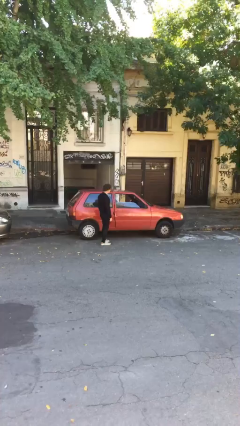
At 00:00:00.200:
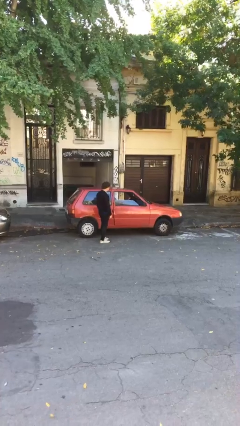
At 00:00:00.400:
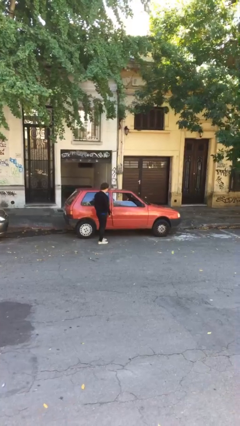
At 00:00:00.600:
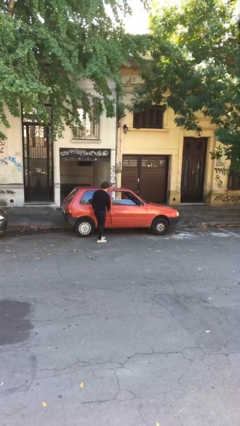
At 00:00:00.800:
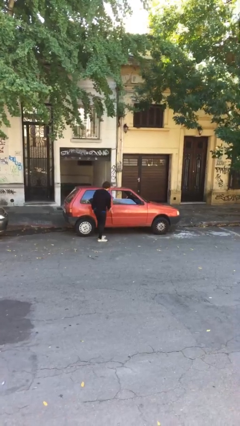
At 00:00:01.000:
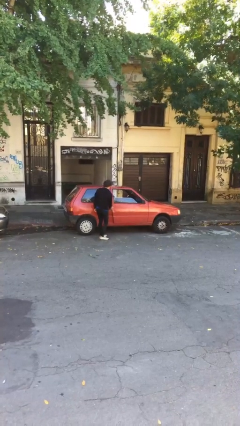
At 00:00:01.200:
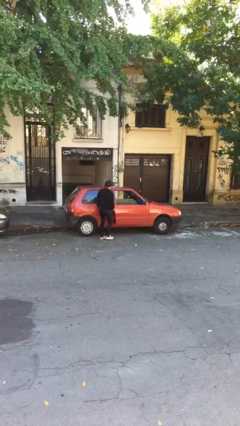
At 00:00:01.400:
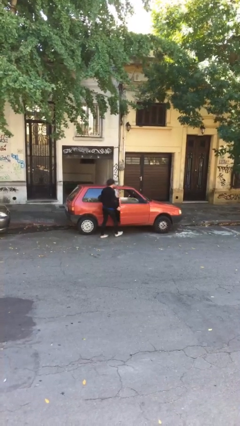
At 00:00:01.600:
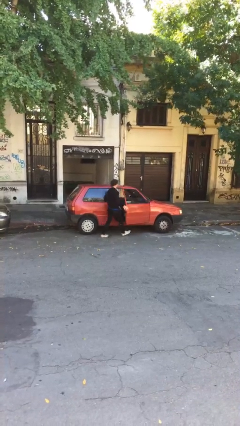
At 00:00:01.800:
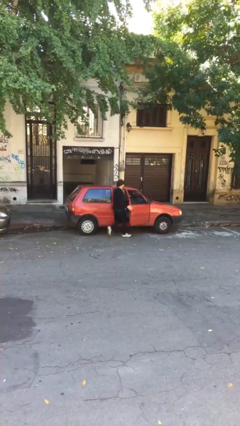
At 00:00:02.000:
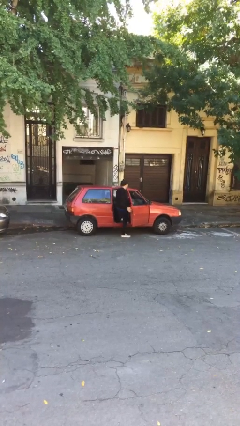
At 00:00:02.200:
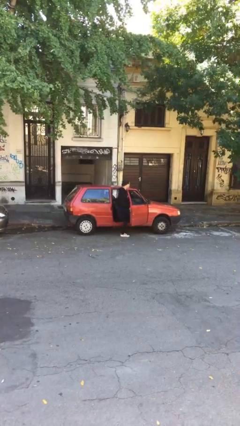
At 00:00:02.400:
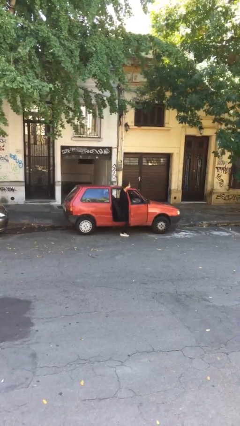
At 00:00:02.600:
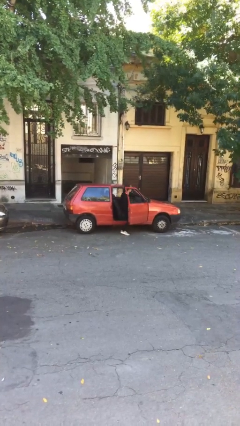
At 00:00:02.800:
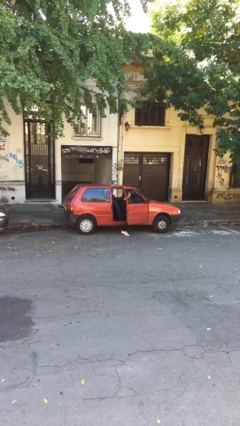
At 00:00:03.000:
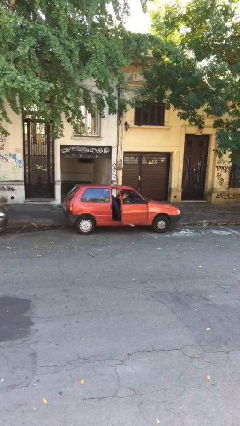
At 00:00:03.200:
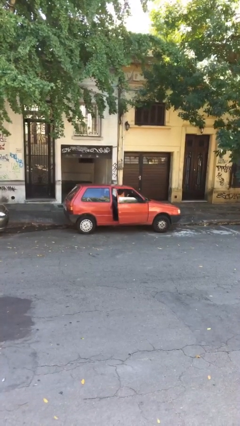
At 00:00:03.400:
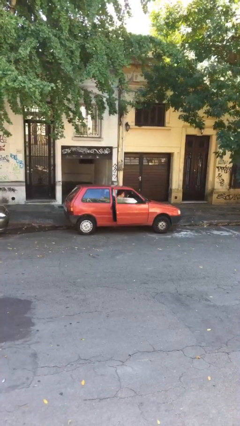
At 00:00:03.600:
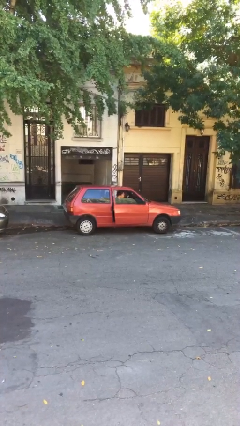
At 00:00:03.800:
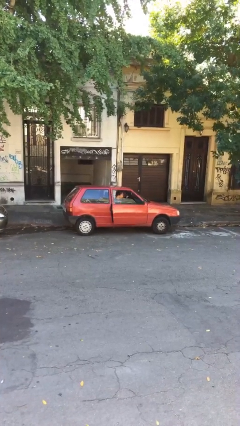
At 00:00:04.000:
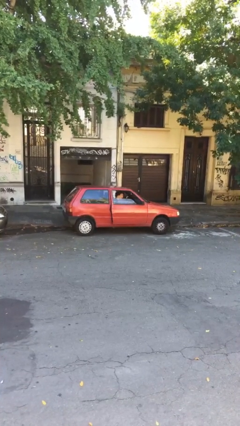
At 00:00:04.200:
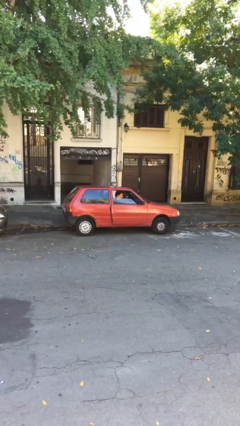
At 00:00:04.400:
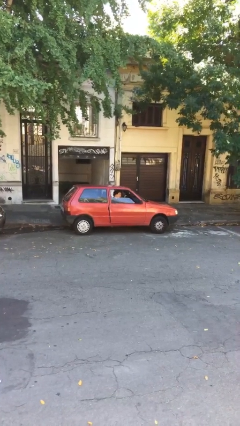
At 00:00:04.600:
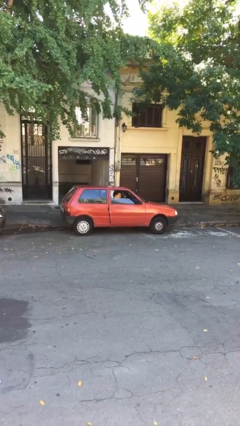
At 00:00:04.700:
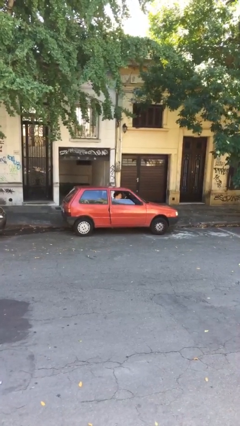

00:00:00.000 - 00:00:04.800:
car picks up person

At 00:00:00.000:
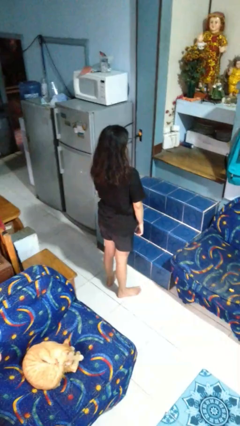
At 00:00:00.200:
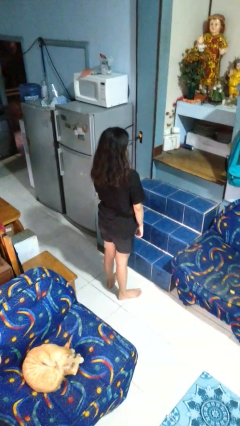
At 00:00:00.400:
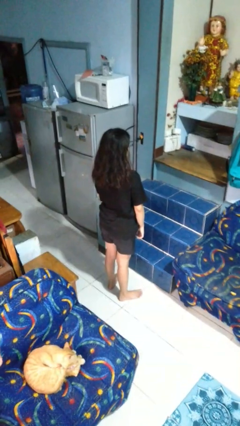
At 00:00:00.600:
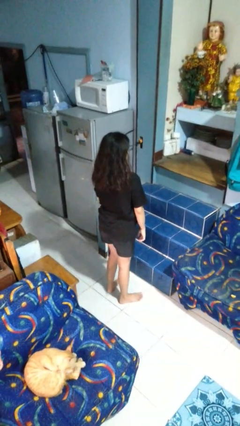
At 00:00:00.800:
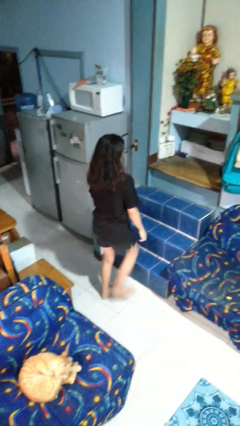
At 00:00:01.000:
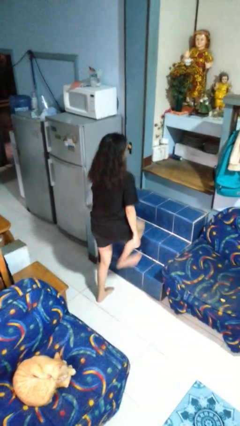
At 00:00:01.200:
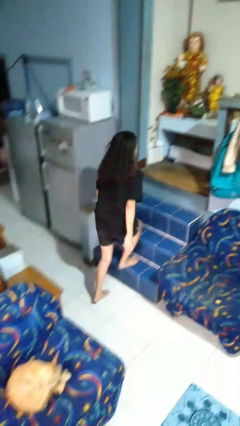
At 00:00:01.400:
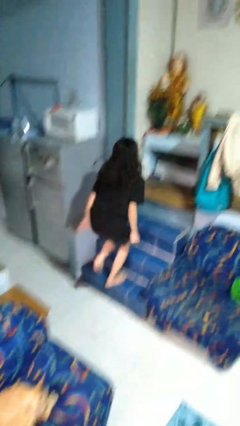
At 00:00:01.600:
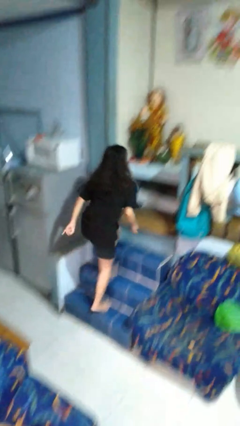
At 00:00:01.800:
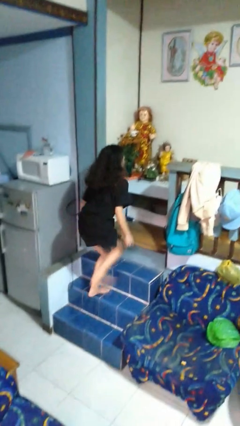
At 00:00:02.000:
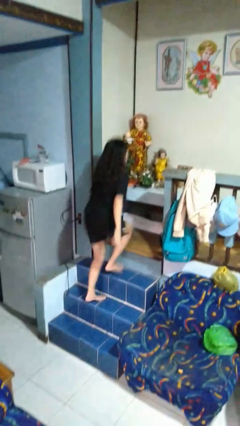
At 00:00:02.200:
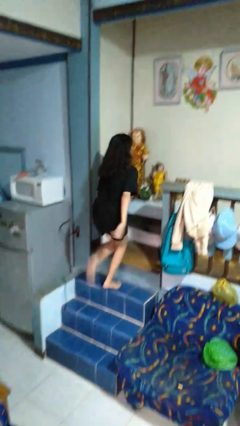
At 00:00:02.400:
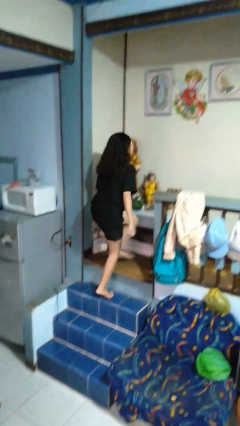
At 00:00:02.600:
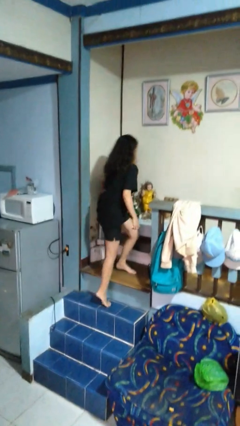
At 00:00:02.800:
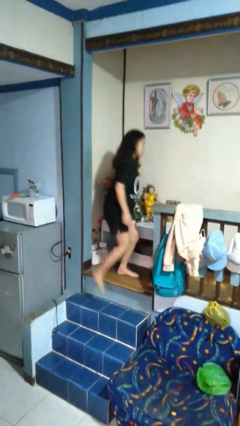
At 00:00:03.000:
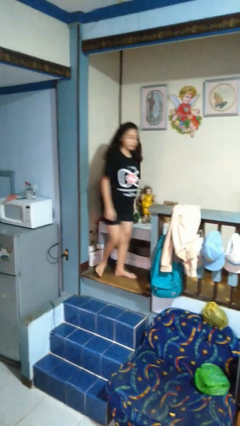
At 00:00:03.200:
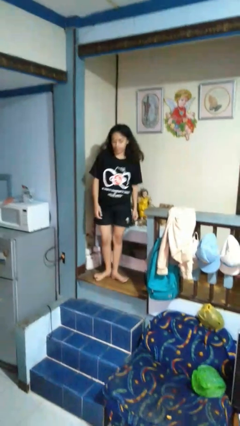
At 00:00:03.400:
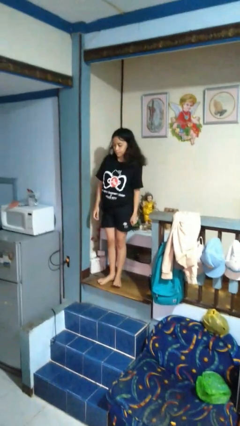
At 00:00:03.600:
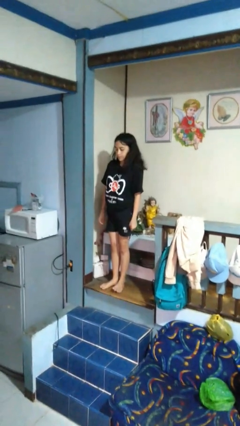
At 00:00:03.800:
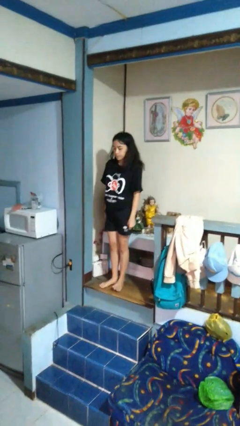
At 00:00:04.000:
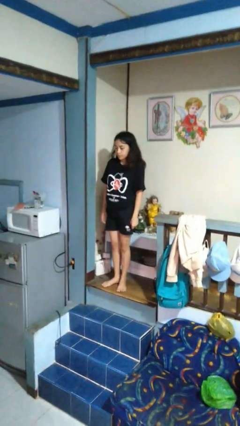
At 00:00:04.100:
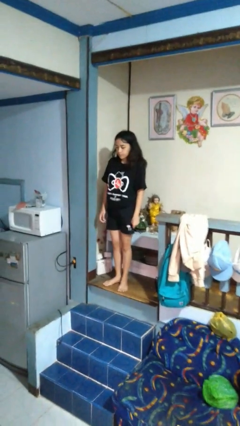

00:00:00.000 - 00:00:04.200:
person climbs up stairs

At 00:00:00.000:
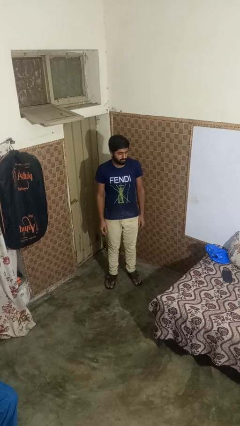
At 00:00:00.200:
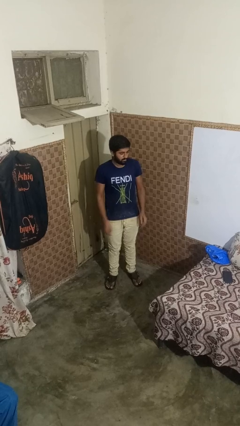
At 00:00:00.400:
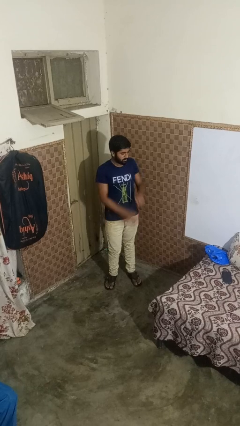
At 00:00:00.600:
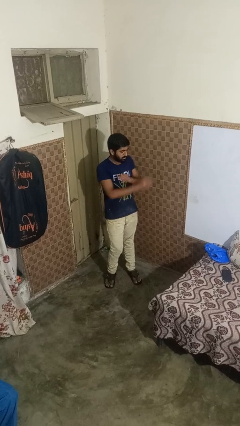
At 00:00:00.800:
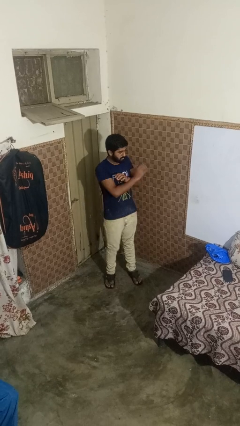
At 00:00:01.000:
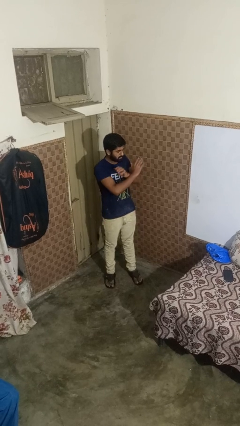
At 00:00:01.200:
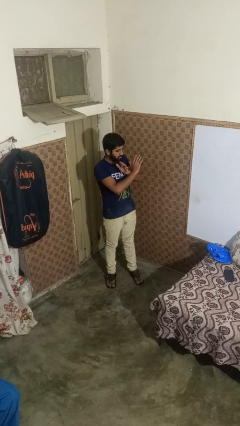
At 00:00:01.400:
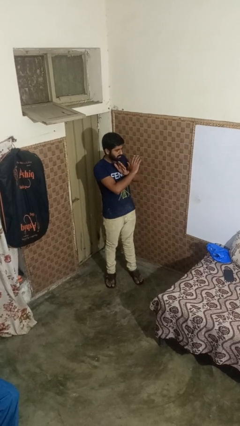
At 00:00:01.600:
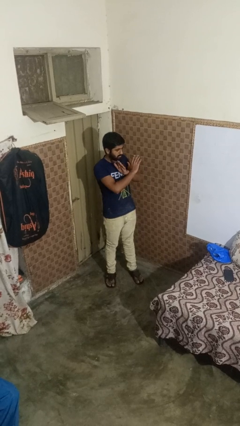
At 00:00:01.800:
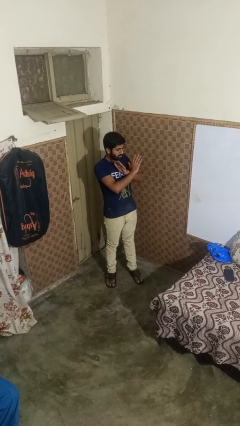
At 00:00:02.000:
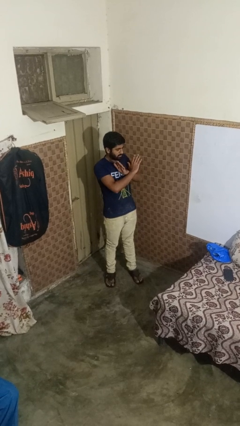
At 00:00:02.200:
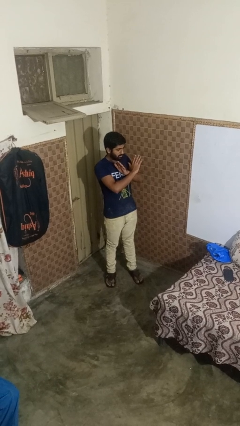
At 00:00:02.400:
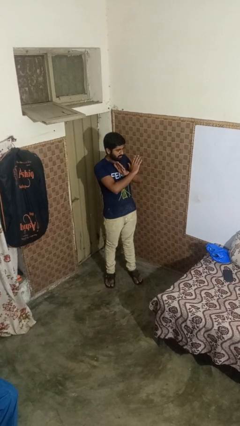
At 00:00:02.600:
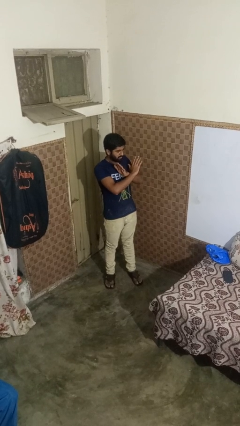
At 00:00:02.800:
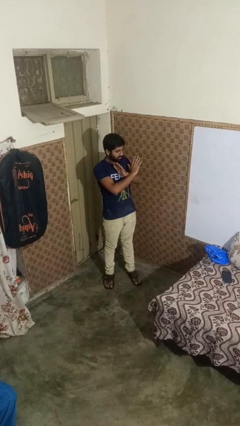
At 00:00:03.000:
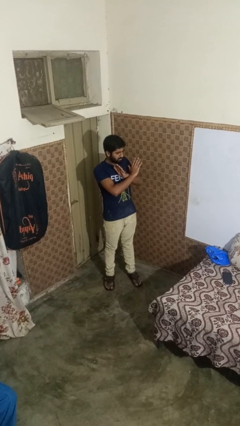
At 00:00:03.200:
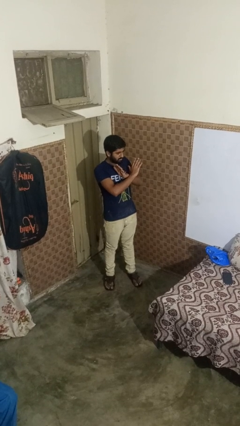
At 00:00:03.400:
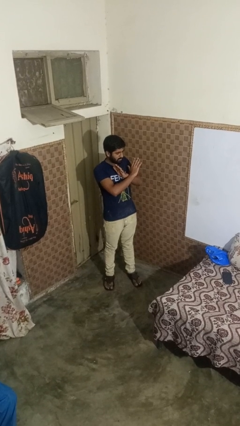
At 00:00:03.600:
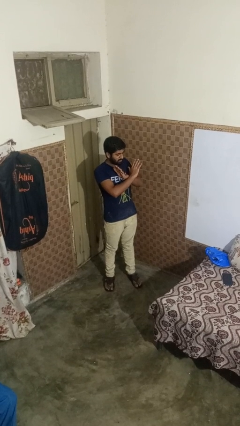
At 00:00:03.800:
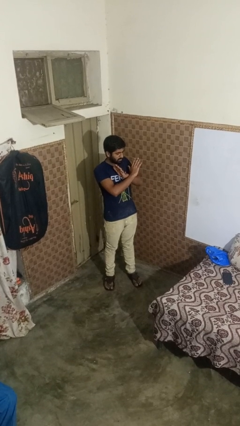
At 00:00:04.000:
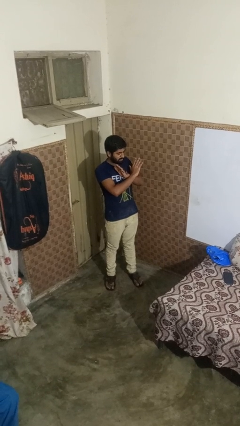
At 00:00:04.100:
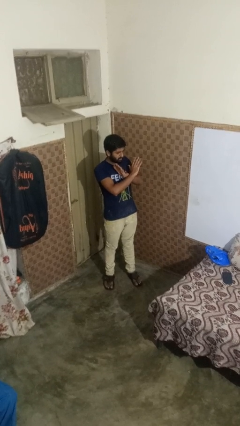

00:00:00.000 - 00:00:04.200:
person gestures arms x

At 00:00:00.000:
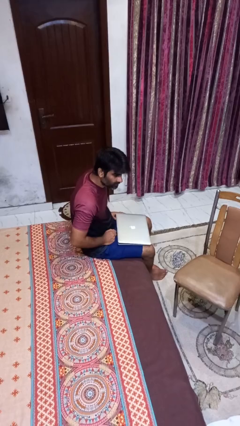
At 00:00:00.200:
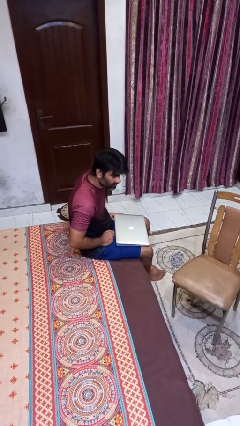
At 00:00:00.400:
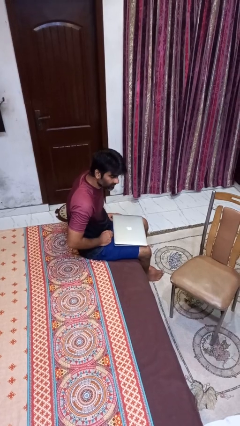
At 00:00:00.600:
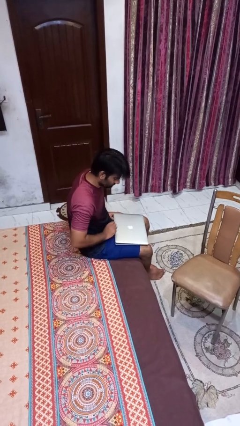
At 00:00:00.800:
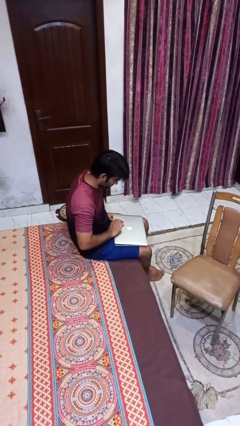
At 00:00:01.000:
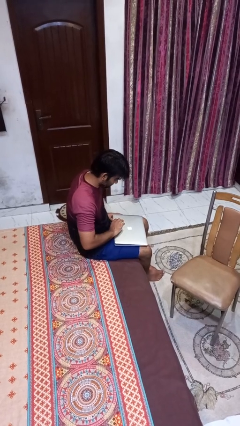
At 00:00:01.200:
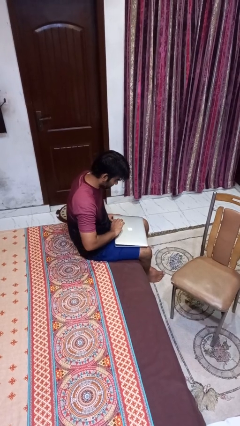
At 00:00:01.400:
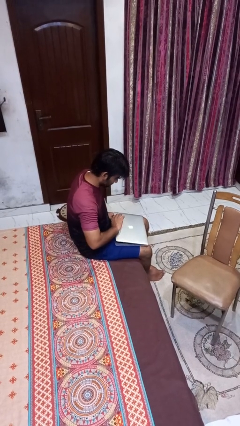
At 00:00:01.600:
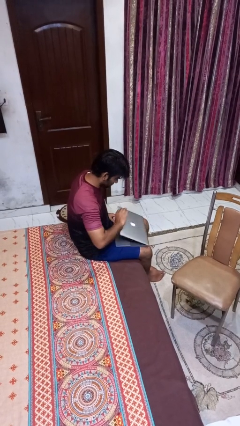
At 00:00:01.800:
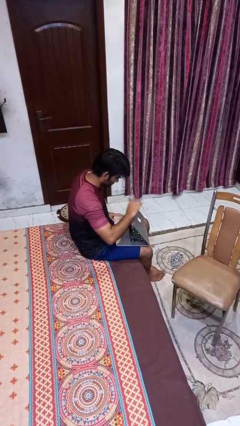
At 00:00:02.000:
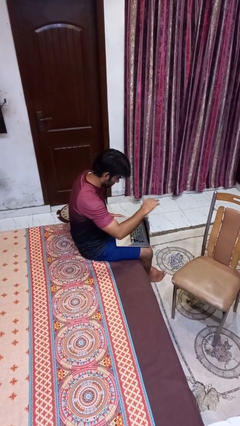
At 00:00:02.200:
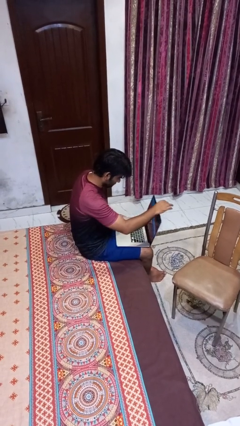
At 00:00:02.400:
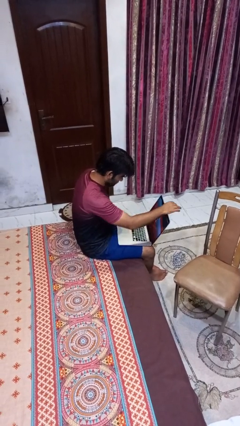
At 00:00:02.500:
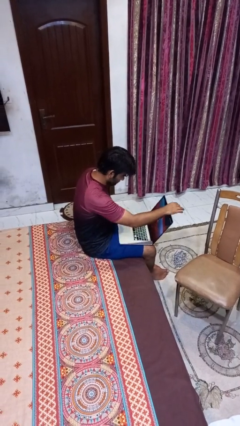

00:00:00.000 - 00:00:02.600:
person opens laptop

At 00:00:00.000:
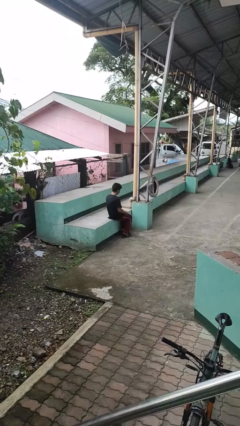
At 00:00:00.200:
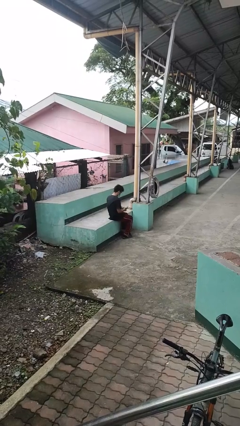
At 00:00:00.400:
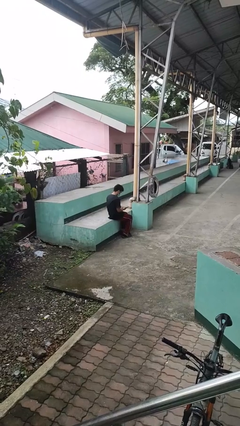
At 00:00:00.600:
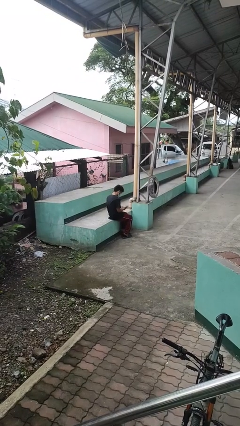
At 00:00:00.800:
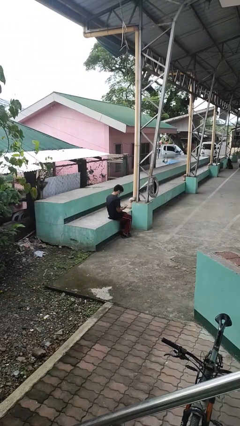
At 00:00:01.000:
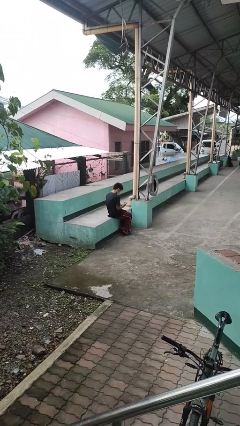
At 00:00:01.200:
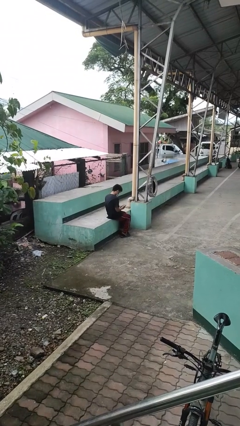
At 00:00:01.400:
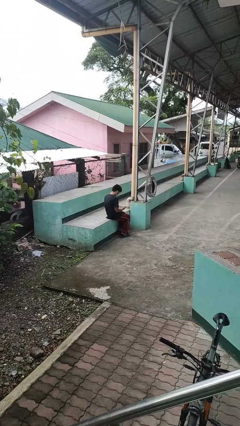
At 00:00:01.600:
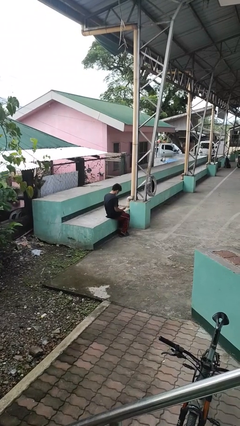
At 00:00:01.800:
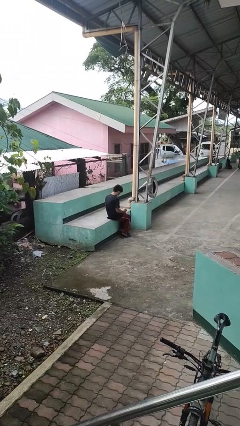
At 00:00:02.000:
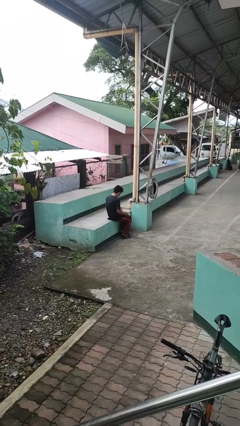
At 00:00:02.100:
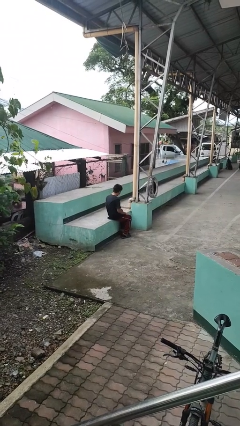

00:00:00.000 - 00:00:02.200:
person looks at hands in lap
